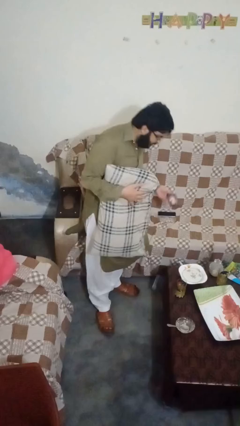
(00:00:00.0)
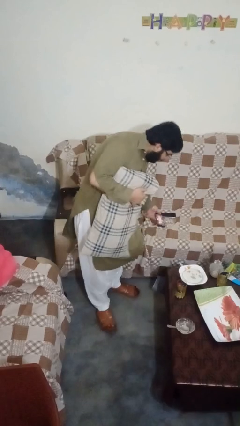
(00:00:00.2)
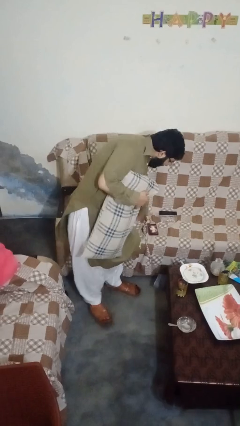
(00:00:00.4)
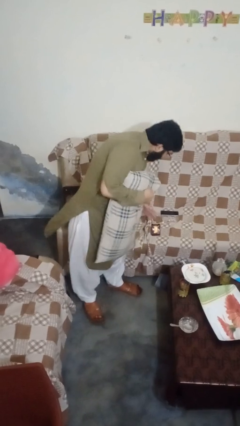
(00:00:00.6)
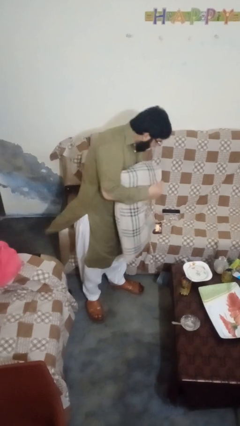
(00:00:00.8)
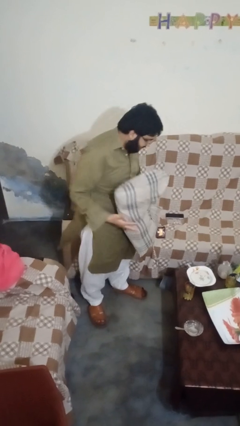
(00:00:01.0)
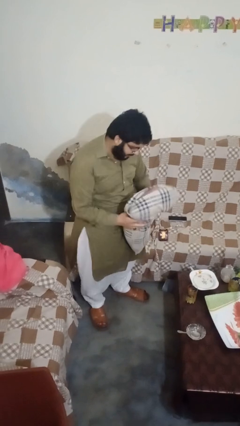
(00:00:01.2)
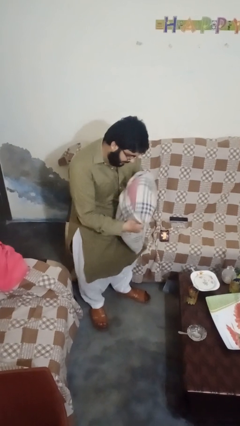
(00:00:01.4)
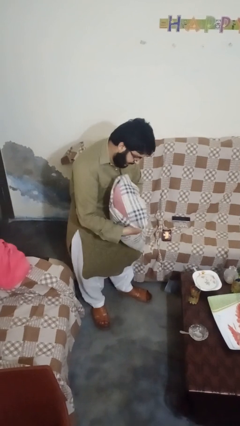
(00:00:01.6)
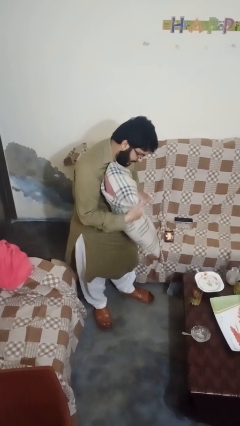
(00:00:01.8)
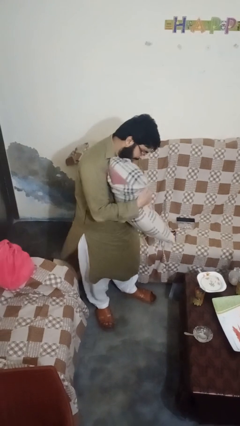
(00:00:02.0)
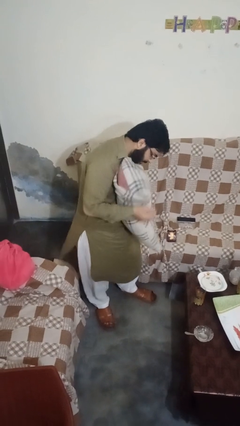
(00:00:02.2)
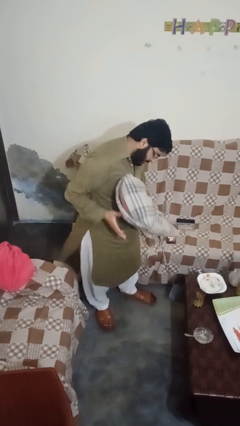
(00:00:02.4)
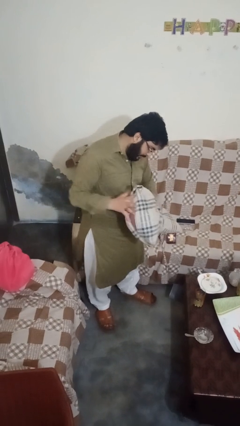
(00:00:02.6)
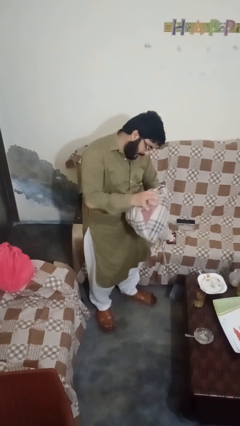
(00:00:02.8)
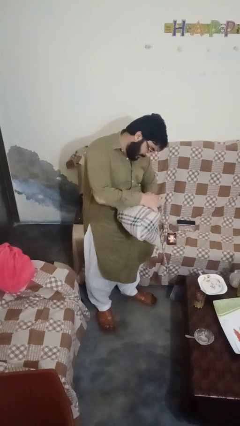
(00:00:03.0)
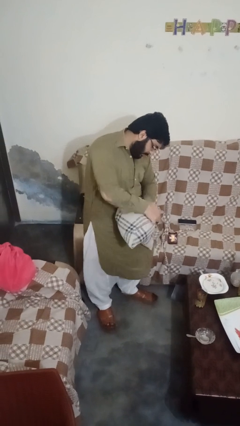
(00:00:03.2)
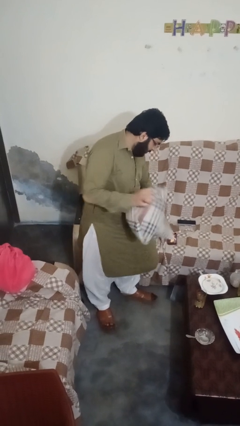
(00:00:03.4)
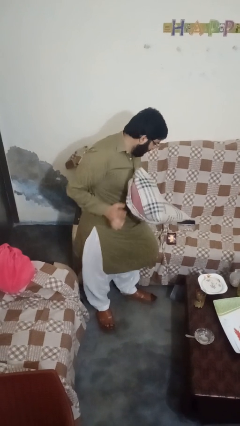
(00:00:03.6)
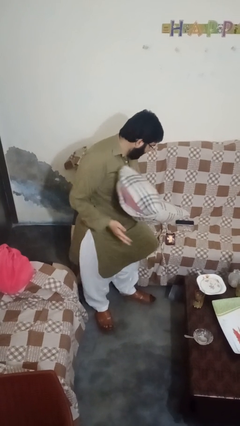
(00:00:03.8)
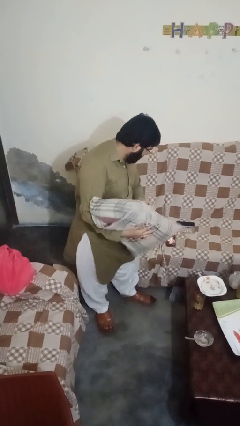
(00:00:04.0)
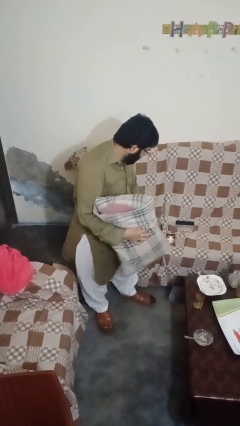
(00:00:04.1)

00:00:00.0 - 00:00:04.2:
person squeezes object

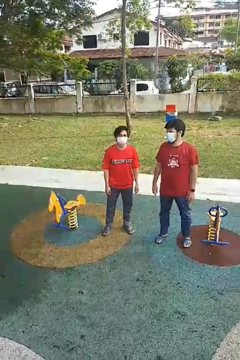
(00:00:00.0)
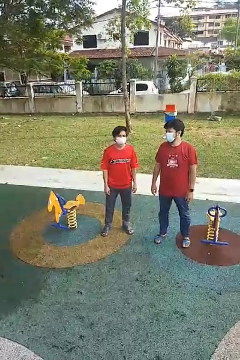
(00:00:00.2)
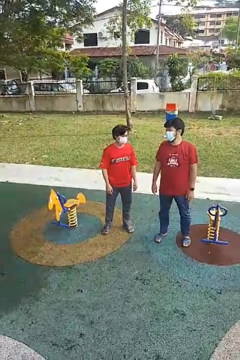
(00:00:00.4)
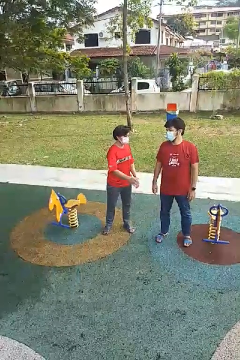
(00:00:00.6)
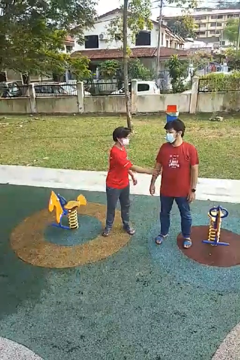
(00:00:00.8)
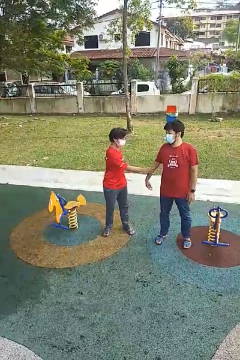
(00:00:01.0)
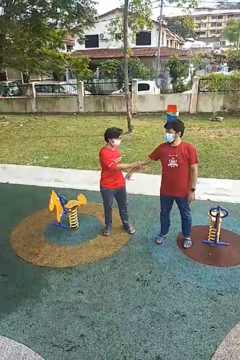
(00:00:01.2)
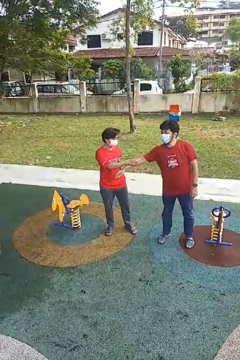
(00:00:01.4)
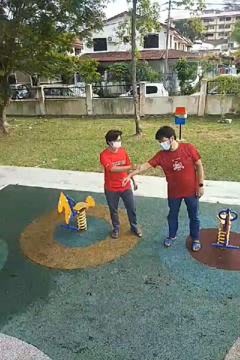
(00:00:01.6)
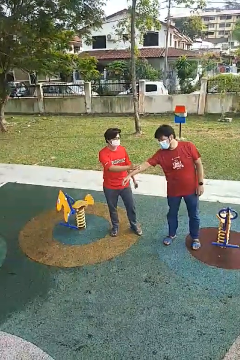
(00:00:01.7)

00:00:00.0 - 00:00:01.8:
person grabs person by forearm

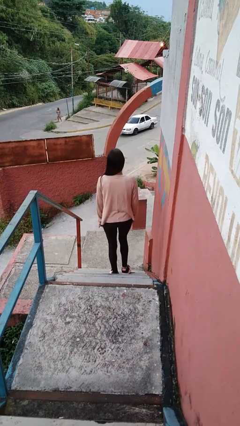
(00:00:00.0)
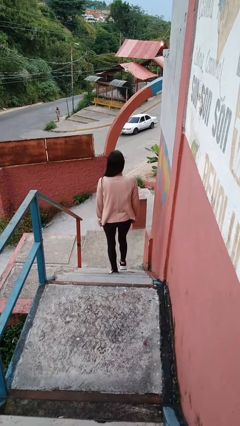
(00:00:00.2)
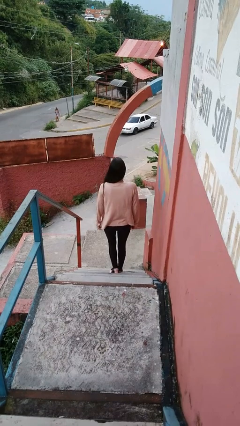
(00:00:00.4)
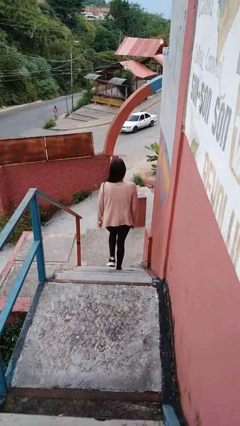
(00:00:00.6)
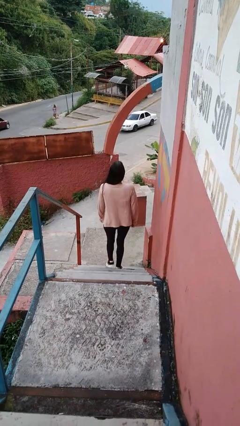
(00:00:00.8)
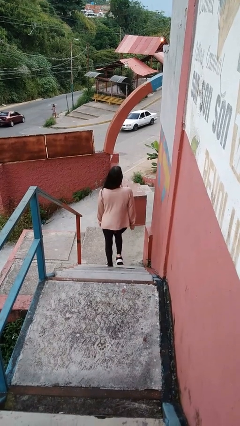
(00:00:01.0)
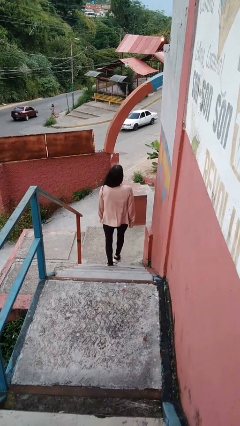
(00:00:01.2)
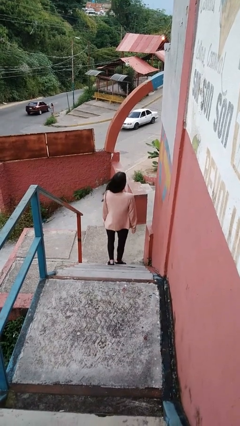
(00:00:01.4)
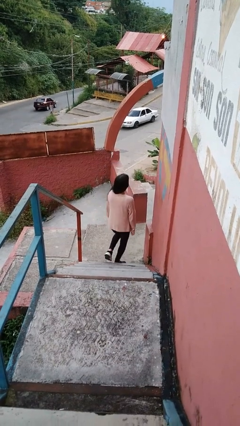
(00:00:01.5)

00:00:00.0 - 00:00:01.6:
person climbs down stairs

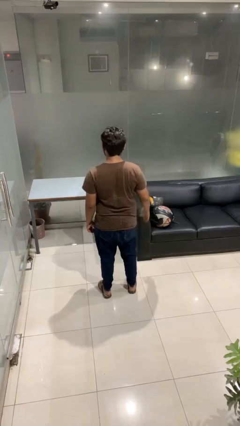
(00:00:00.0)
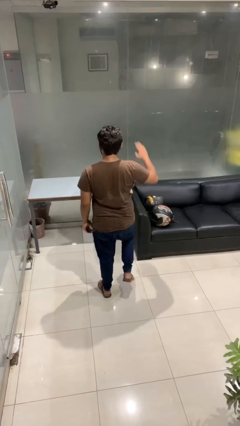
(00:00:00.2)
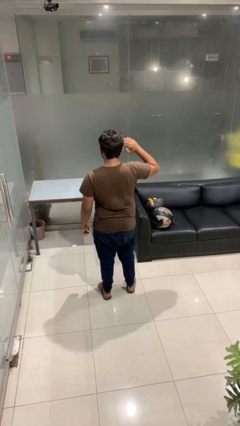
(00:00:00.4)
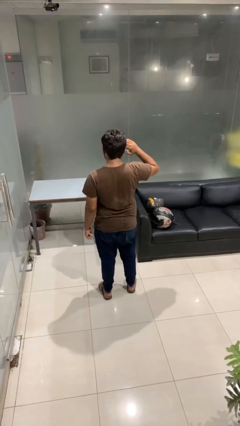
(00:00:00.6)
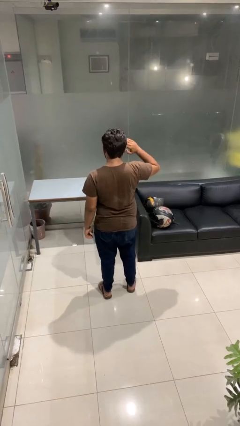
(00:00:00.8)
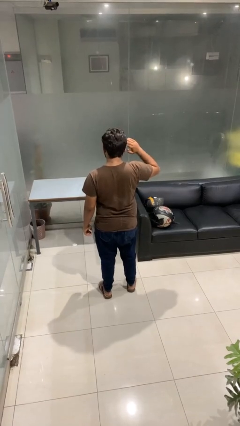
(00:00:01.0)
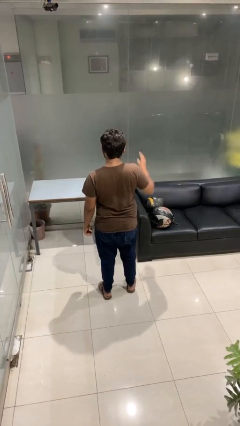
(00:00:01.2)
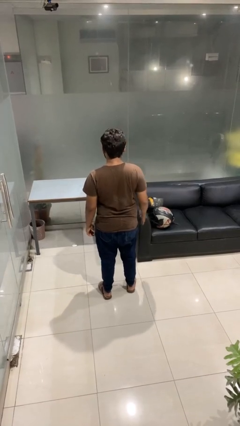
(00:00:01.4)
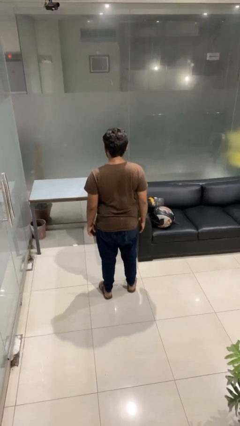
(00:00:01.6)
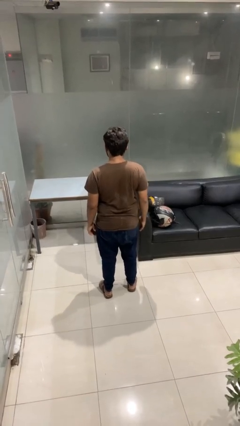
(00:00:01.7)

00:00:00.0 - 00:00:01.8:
person salutes

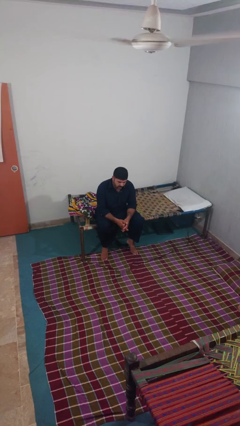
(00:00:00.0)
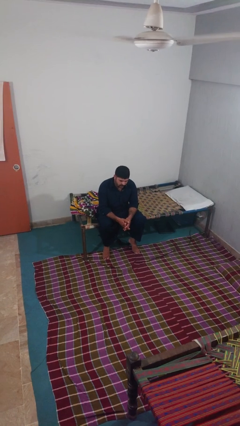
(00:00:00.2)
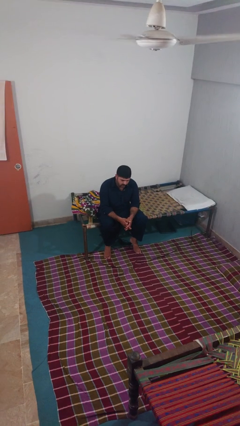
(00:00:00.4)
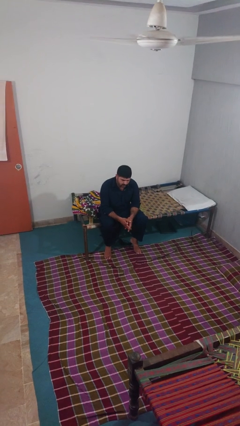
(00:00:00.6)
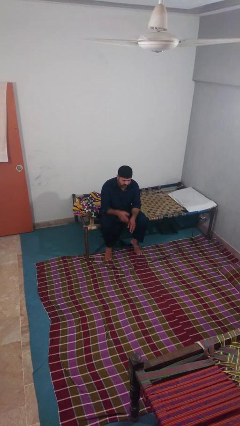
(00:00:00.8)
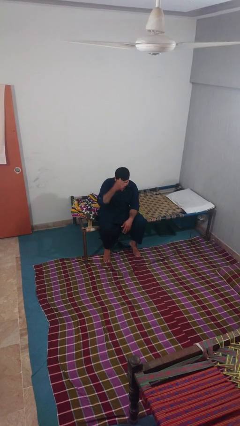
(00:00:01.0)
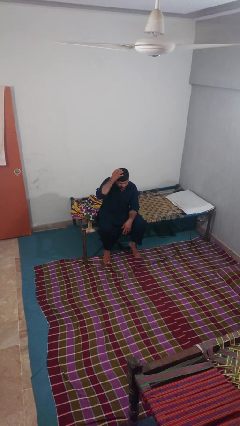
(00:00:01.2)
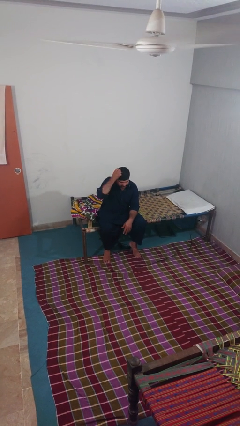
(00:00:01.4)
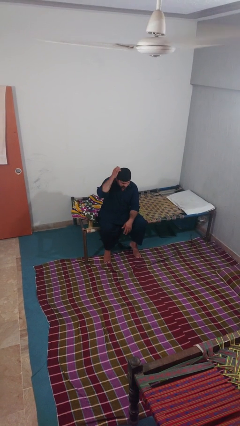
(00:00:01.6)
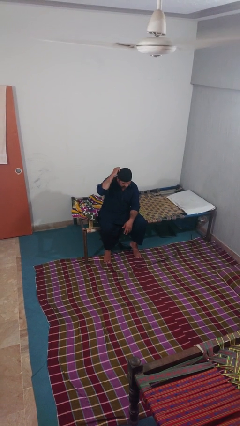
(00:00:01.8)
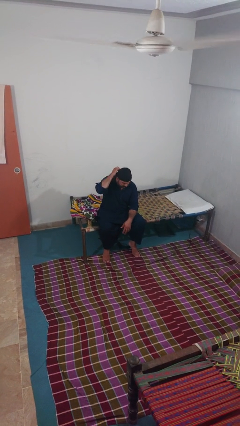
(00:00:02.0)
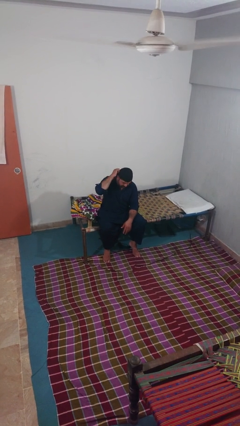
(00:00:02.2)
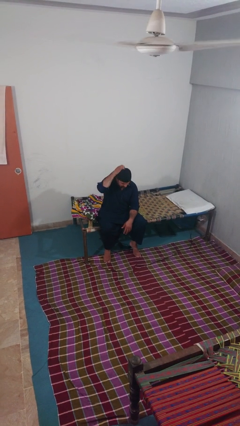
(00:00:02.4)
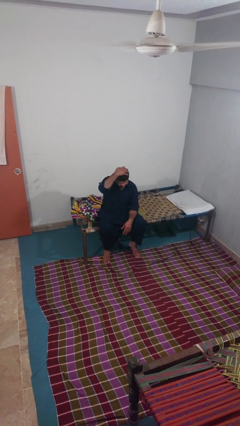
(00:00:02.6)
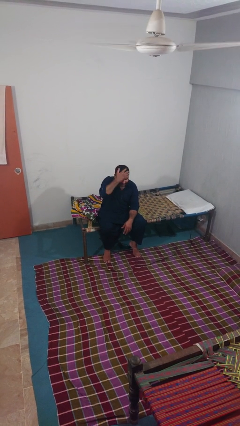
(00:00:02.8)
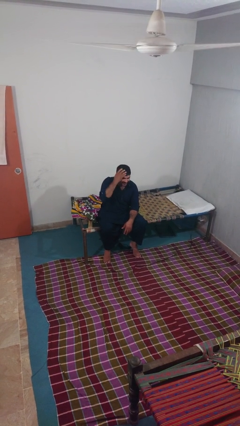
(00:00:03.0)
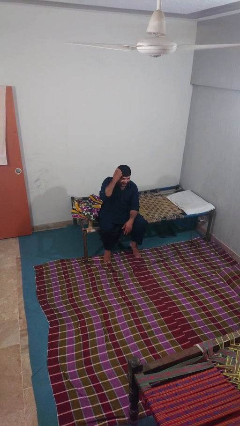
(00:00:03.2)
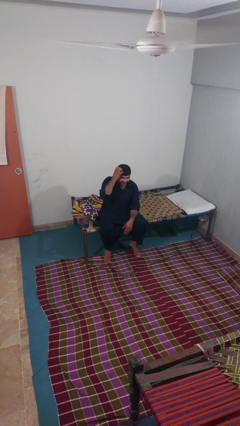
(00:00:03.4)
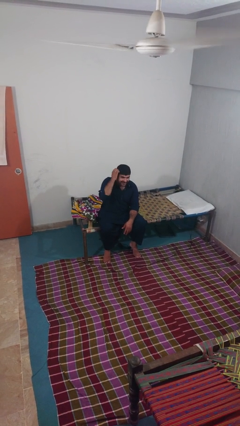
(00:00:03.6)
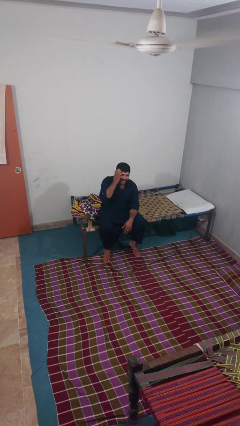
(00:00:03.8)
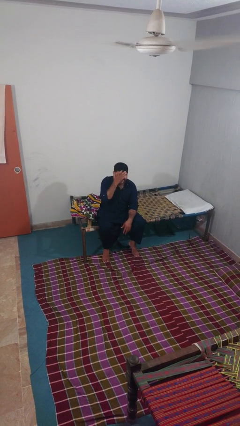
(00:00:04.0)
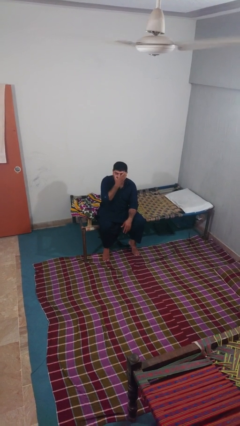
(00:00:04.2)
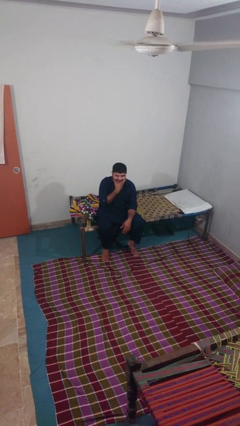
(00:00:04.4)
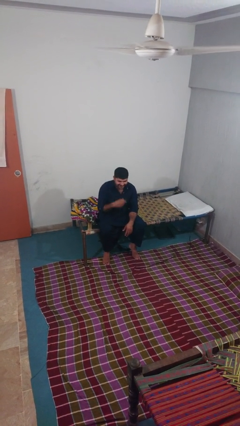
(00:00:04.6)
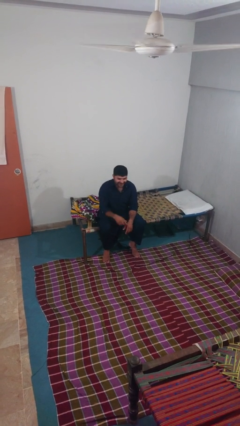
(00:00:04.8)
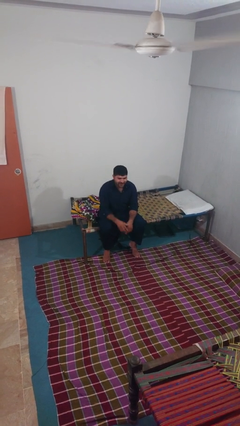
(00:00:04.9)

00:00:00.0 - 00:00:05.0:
person scratches face

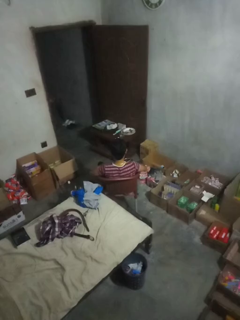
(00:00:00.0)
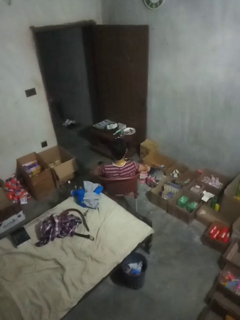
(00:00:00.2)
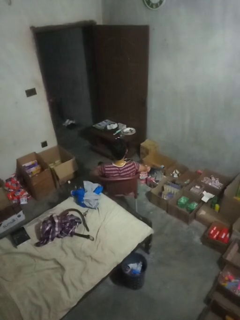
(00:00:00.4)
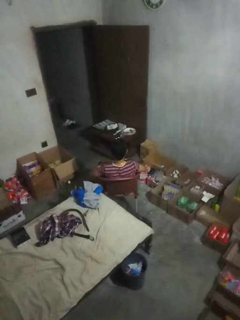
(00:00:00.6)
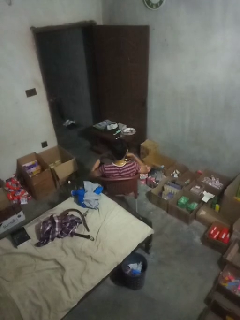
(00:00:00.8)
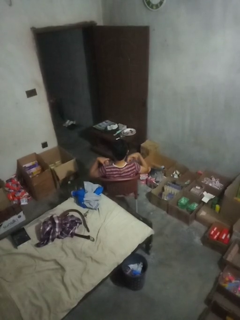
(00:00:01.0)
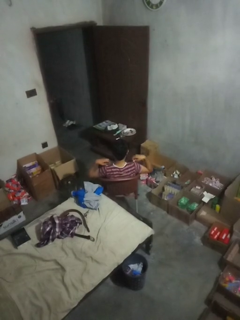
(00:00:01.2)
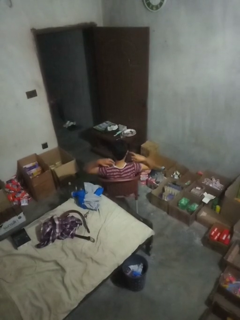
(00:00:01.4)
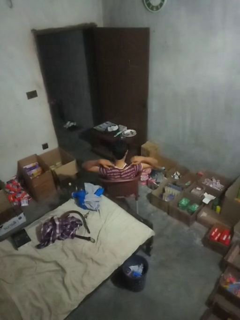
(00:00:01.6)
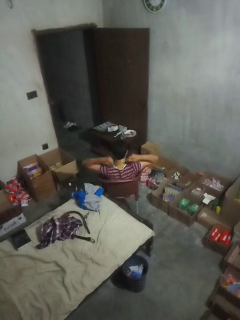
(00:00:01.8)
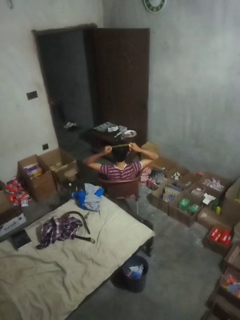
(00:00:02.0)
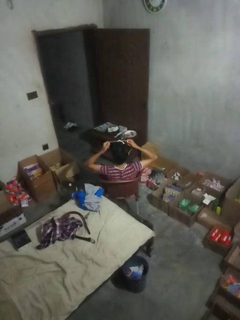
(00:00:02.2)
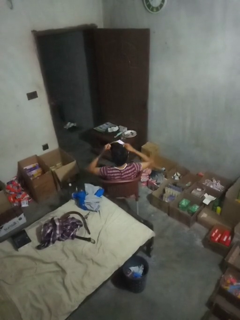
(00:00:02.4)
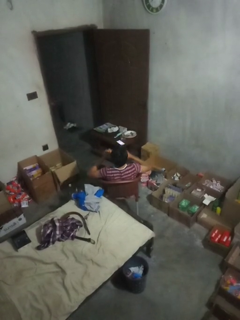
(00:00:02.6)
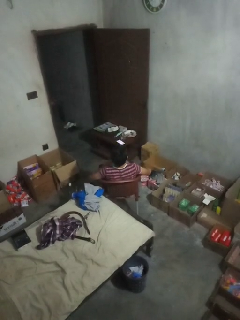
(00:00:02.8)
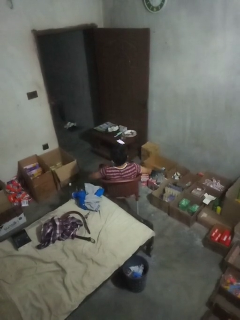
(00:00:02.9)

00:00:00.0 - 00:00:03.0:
person takes off necklace

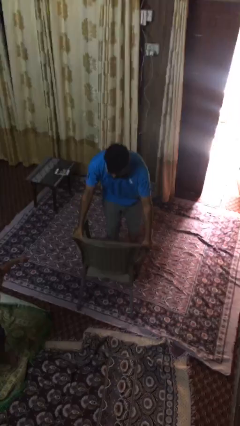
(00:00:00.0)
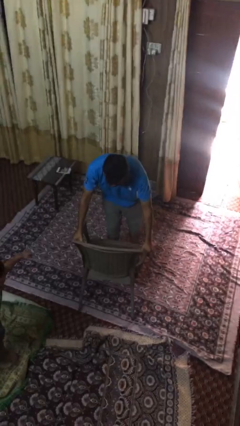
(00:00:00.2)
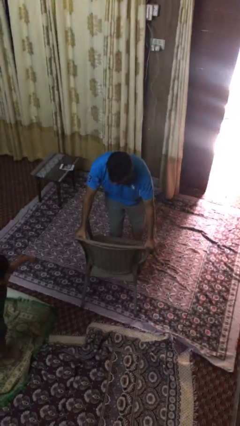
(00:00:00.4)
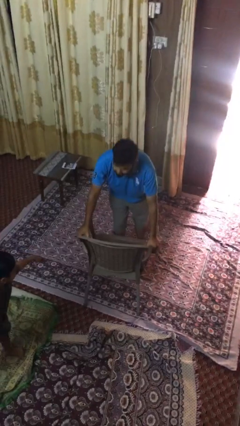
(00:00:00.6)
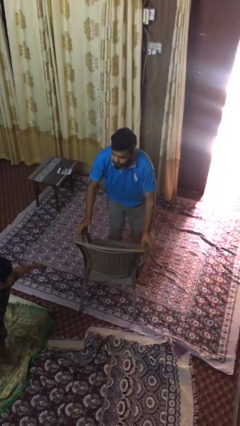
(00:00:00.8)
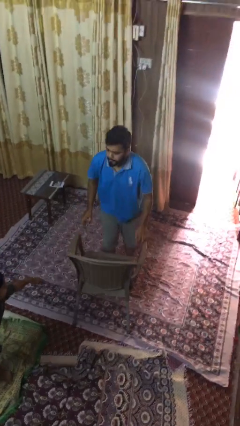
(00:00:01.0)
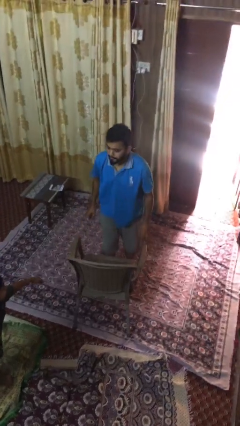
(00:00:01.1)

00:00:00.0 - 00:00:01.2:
person puts down object on floor
